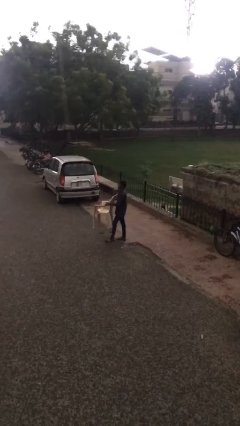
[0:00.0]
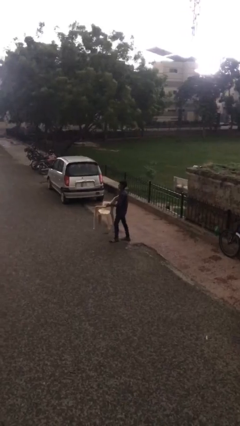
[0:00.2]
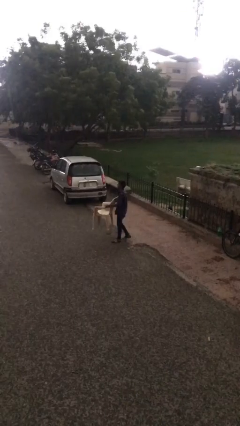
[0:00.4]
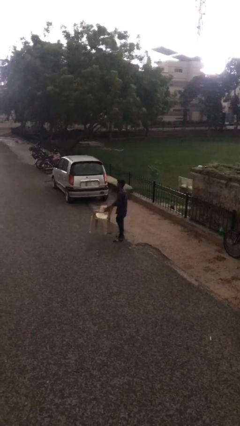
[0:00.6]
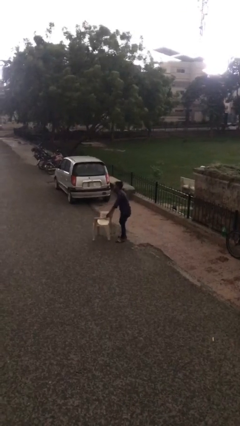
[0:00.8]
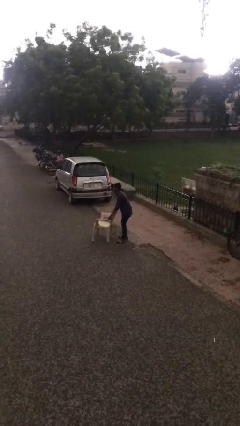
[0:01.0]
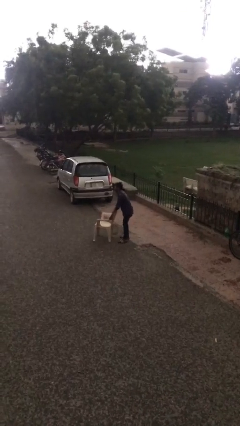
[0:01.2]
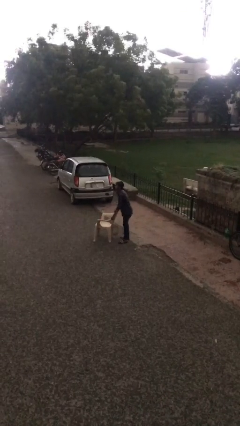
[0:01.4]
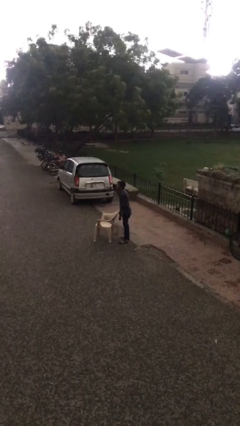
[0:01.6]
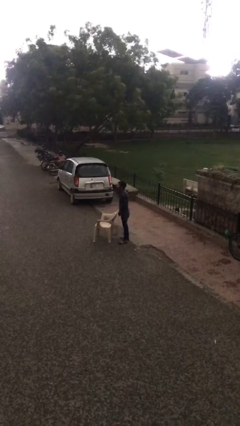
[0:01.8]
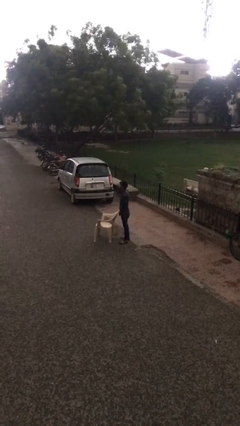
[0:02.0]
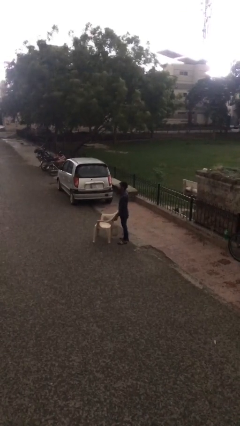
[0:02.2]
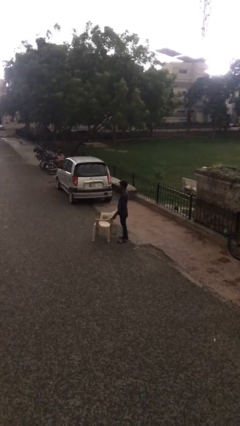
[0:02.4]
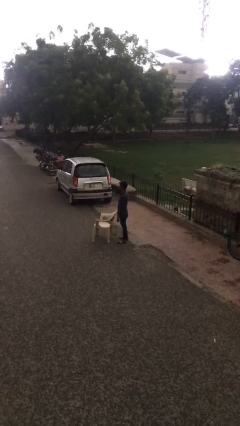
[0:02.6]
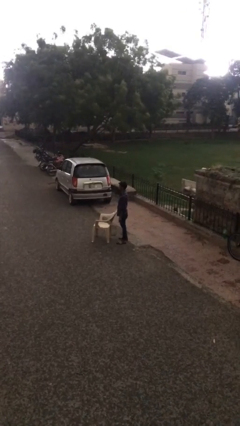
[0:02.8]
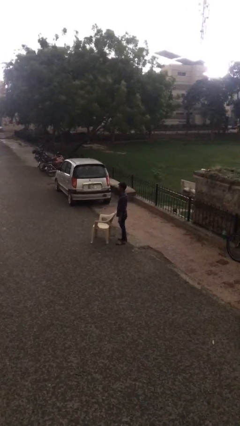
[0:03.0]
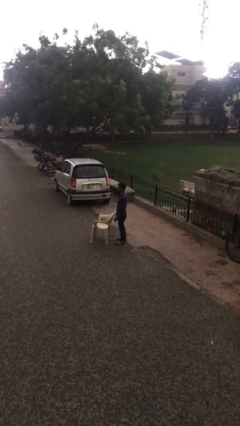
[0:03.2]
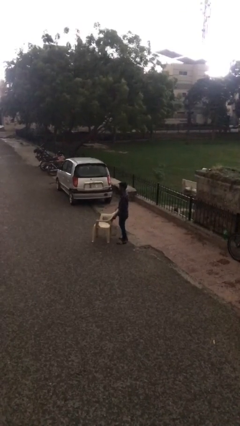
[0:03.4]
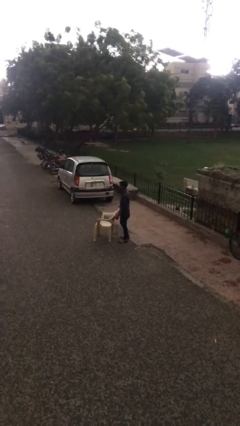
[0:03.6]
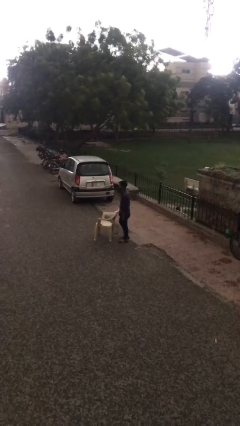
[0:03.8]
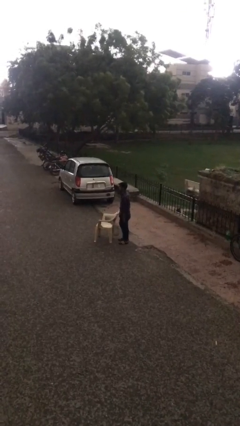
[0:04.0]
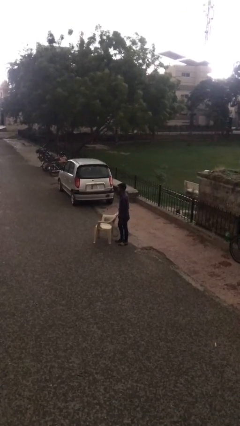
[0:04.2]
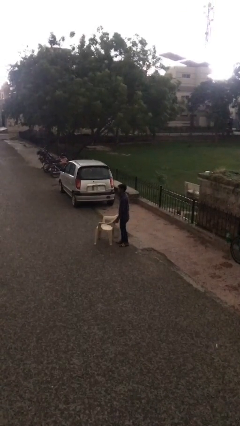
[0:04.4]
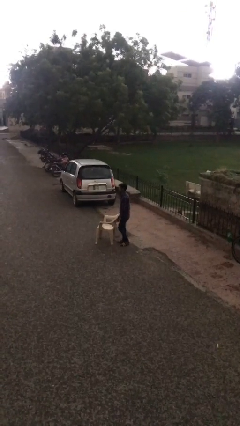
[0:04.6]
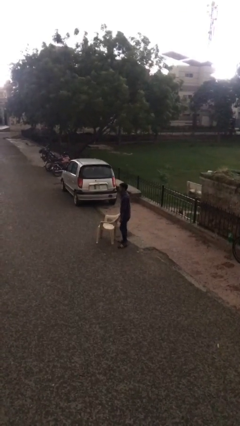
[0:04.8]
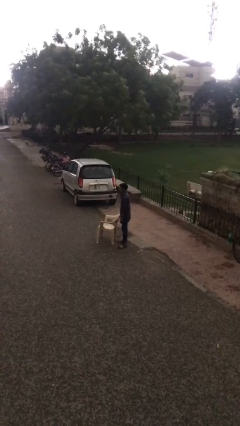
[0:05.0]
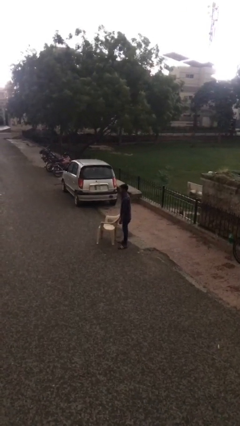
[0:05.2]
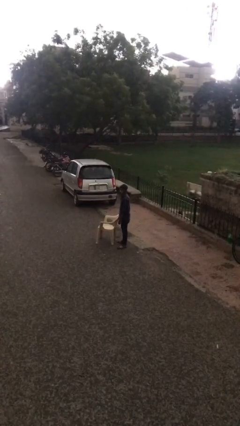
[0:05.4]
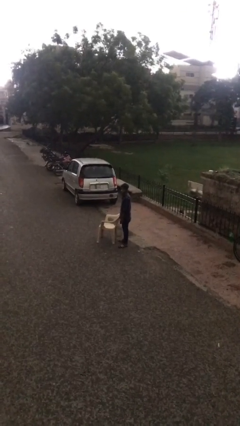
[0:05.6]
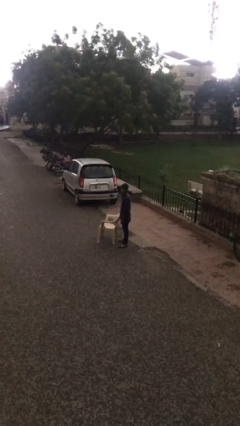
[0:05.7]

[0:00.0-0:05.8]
person puts down object on floor

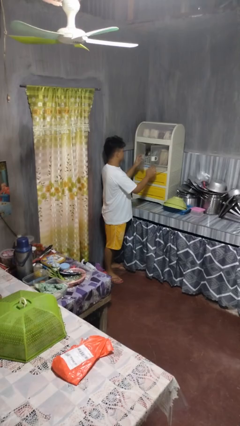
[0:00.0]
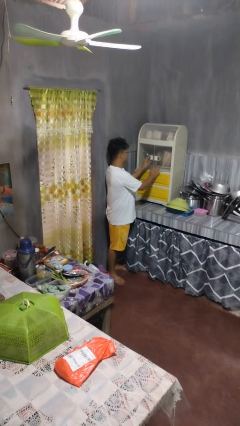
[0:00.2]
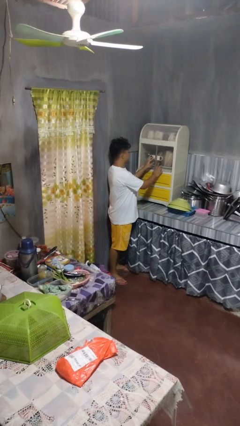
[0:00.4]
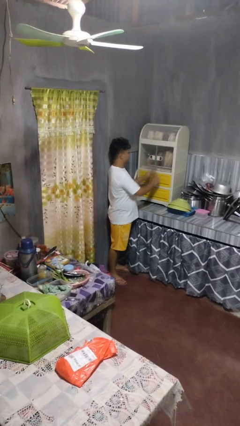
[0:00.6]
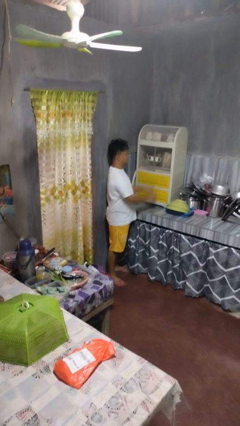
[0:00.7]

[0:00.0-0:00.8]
person closes cabinet

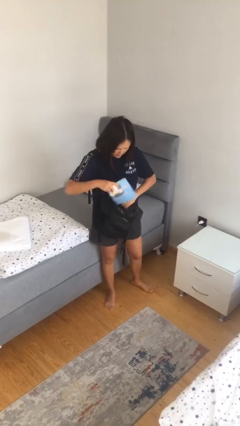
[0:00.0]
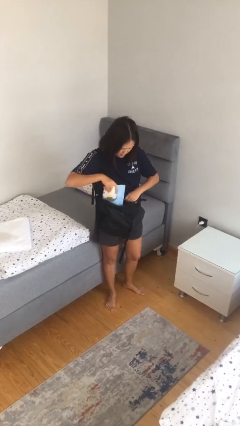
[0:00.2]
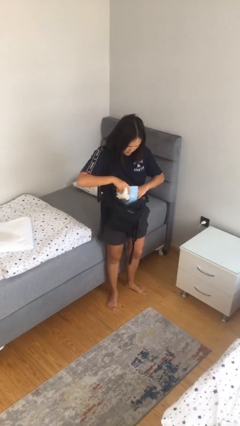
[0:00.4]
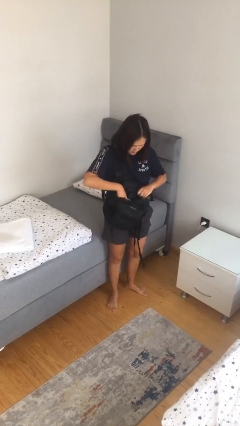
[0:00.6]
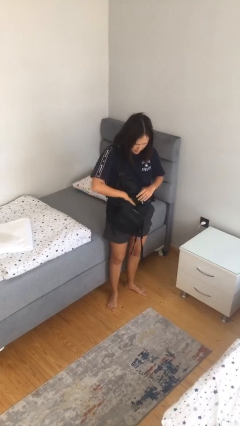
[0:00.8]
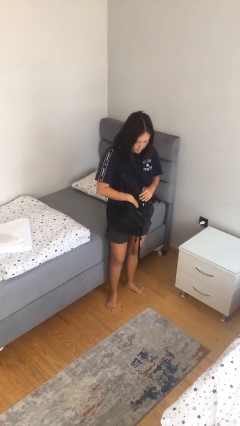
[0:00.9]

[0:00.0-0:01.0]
person puts object into backpack

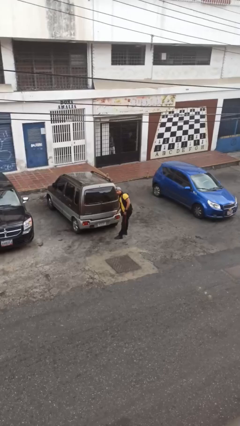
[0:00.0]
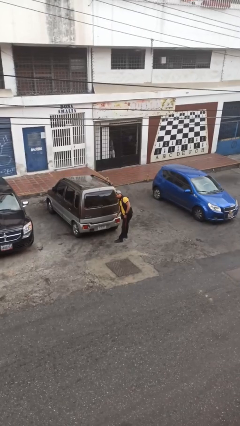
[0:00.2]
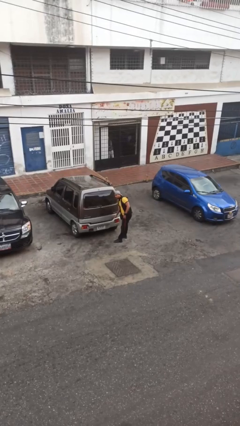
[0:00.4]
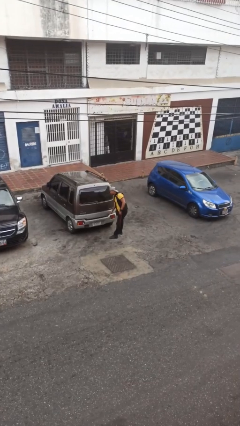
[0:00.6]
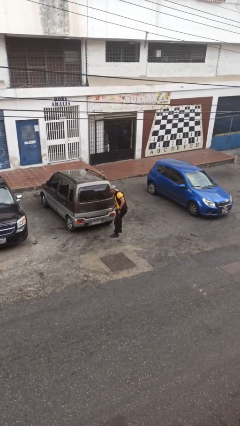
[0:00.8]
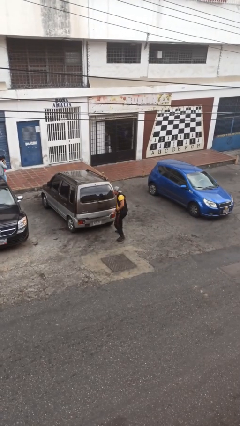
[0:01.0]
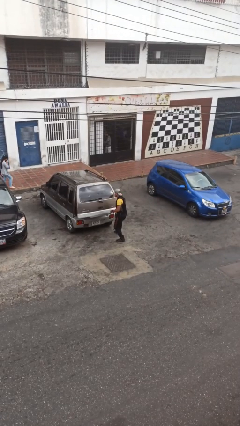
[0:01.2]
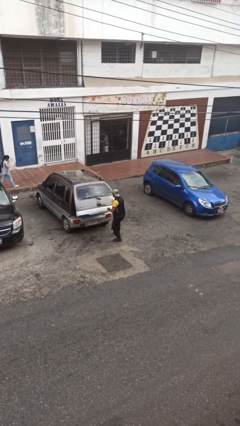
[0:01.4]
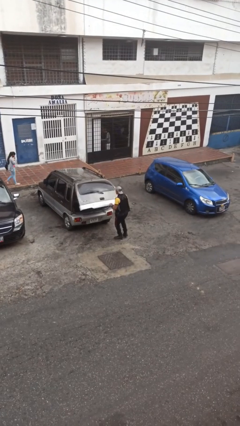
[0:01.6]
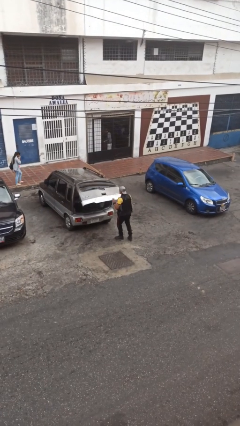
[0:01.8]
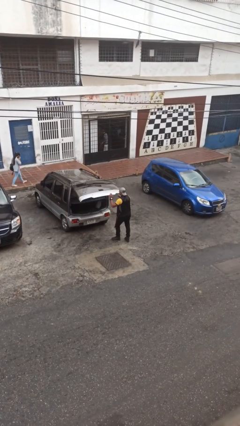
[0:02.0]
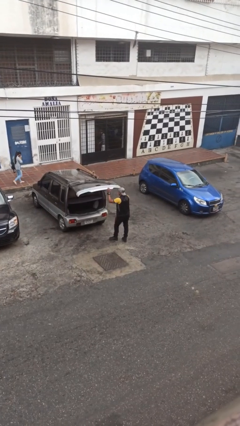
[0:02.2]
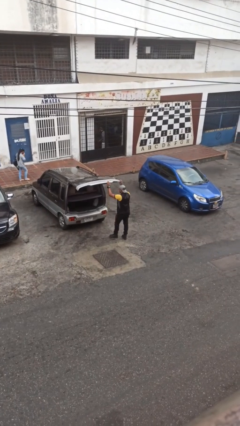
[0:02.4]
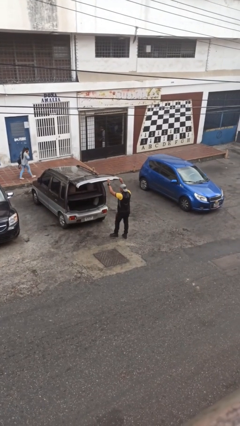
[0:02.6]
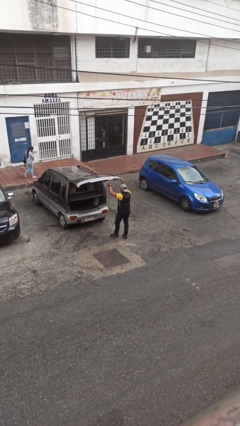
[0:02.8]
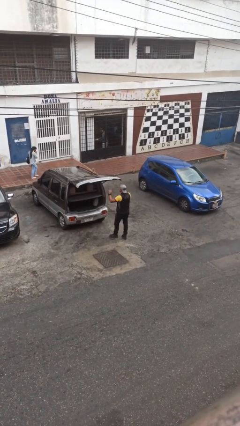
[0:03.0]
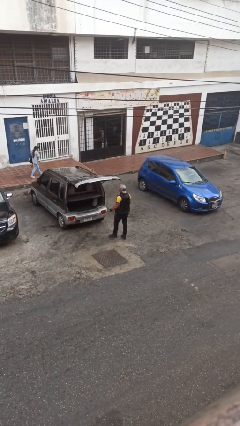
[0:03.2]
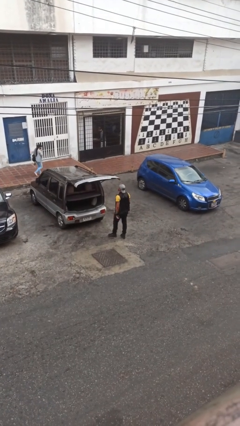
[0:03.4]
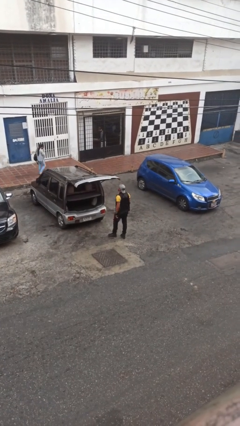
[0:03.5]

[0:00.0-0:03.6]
person opens car trunk

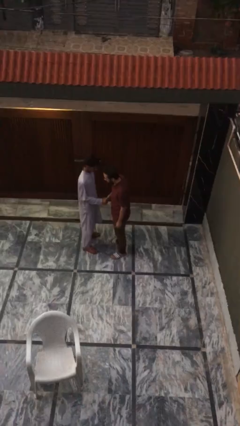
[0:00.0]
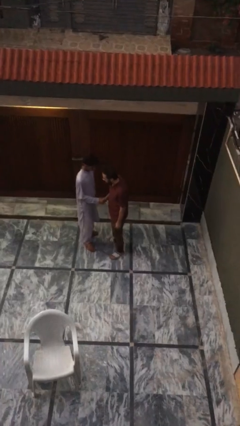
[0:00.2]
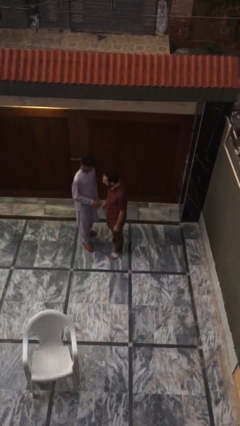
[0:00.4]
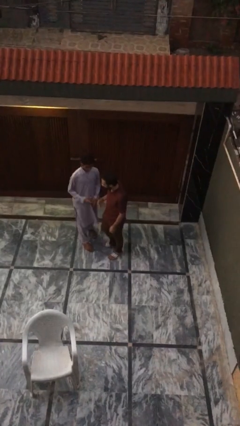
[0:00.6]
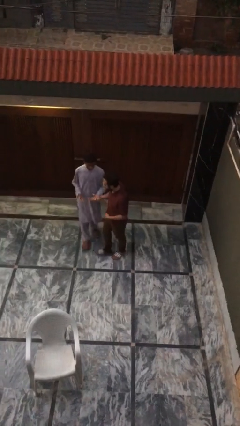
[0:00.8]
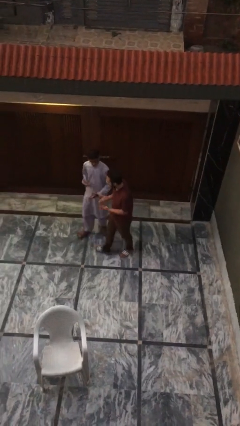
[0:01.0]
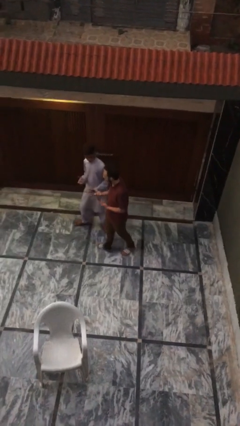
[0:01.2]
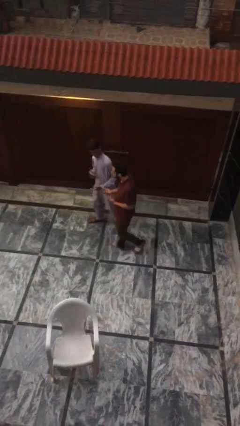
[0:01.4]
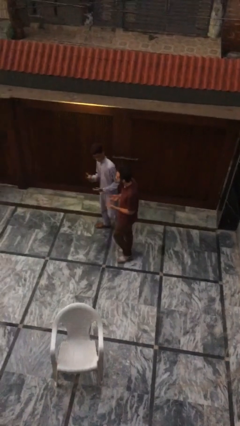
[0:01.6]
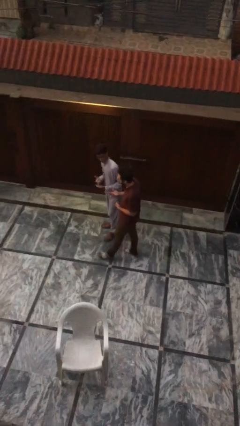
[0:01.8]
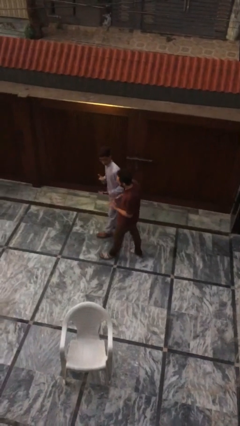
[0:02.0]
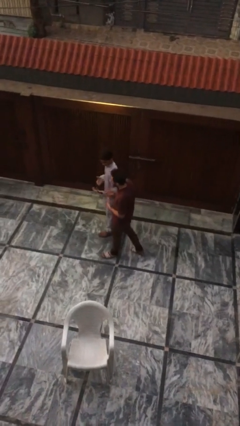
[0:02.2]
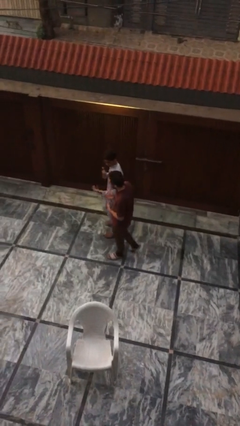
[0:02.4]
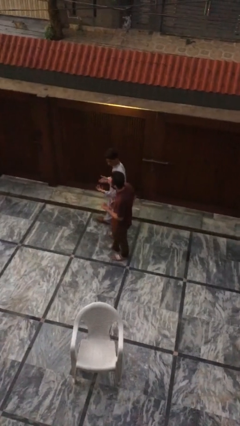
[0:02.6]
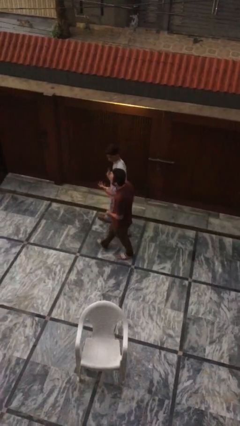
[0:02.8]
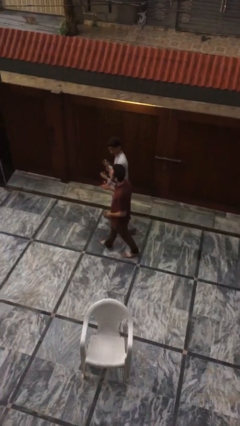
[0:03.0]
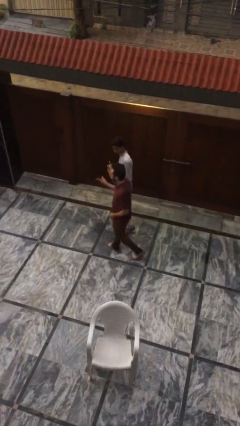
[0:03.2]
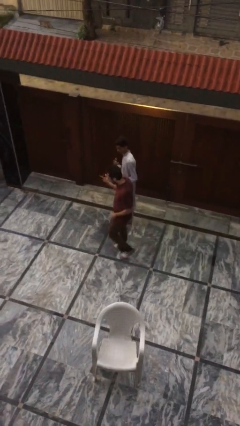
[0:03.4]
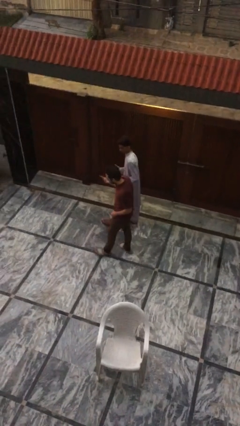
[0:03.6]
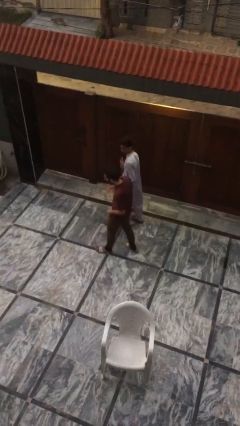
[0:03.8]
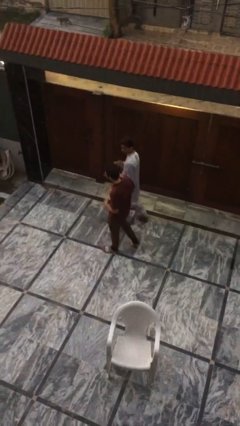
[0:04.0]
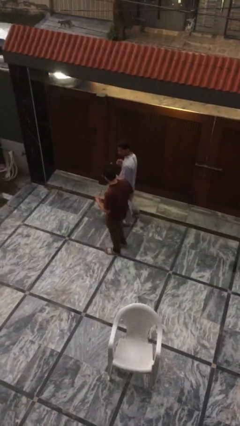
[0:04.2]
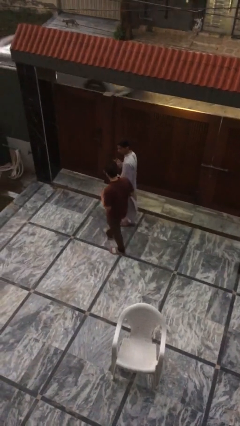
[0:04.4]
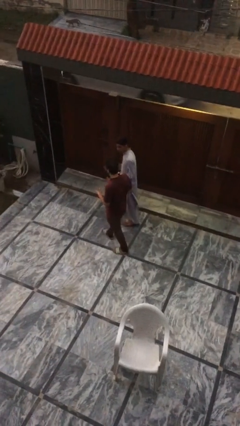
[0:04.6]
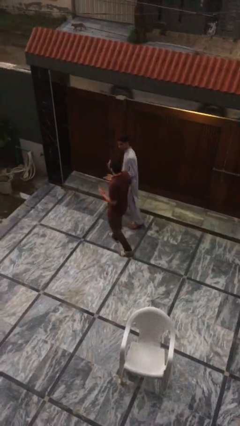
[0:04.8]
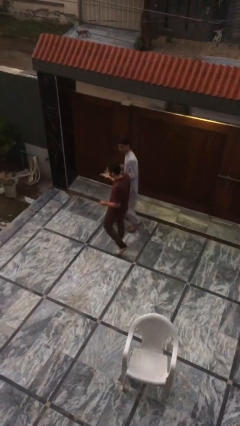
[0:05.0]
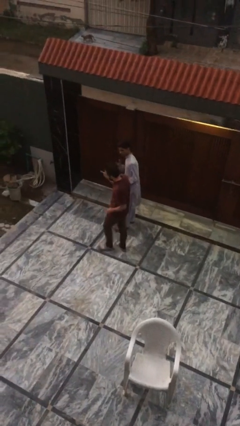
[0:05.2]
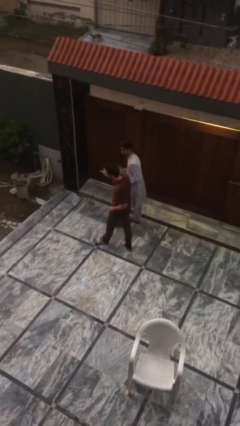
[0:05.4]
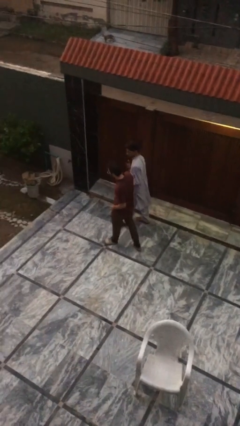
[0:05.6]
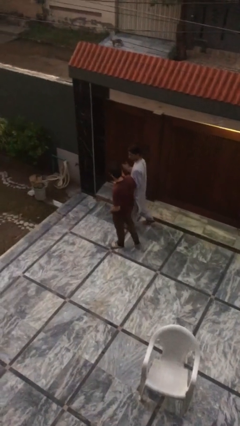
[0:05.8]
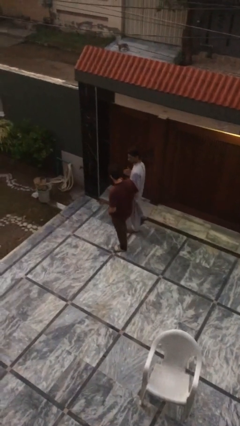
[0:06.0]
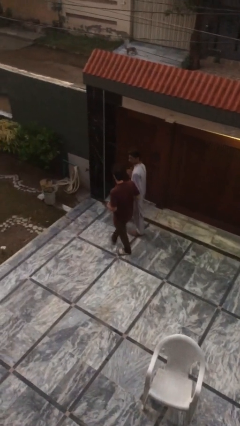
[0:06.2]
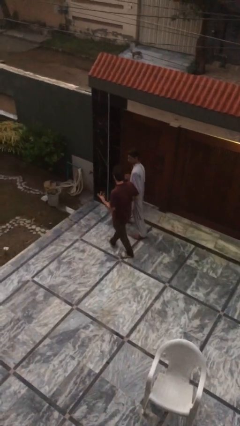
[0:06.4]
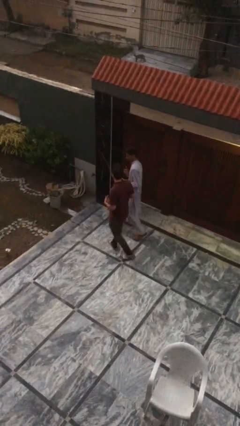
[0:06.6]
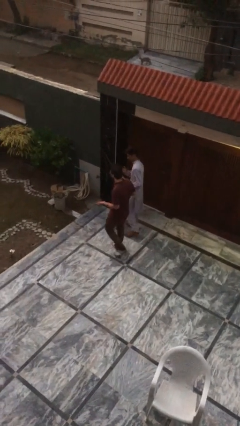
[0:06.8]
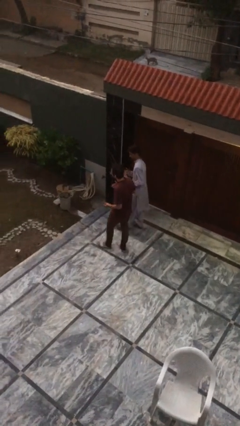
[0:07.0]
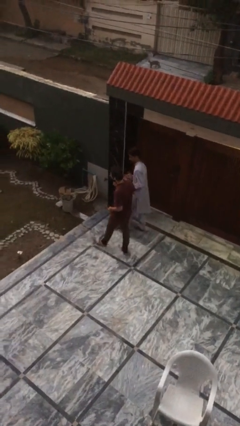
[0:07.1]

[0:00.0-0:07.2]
person talks to person
